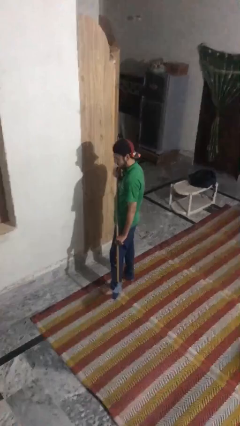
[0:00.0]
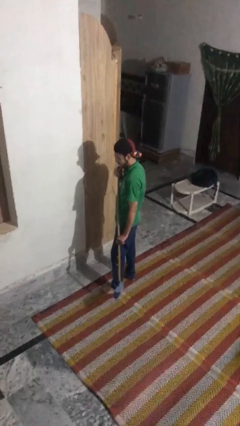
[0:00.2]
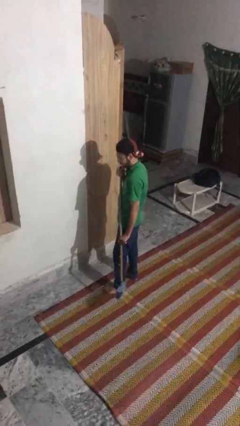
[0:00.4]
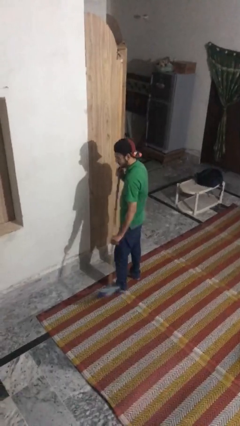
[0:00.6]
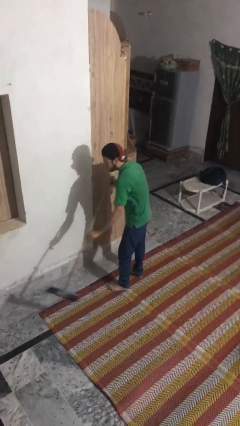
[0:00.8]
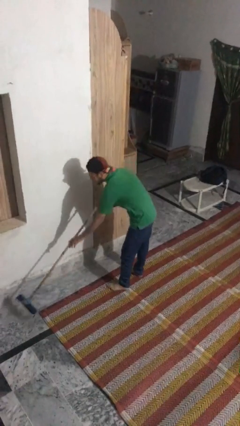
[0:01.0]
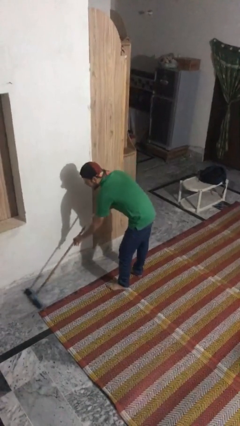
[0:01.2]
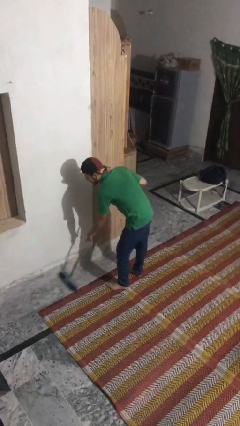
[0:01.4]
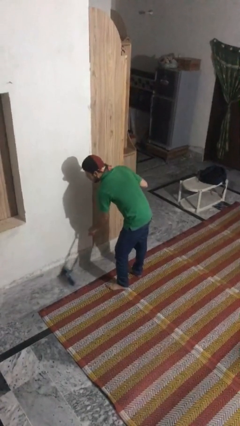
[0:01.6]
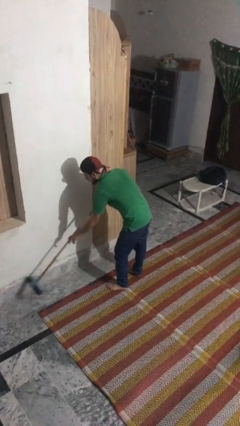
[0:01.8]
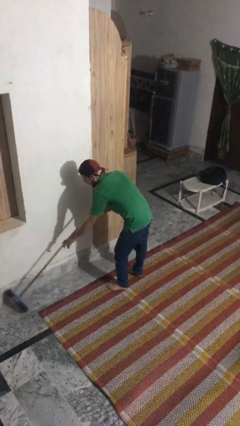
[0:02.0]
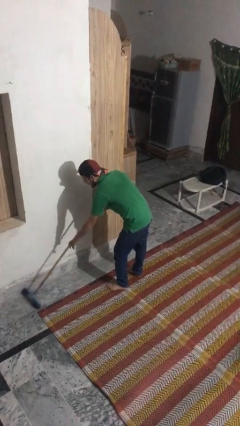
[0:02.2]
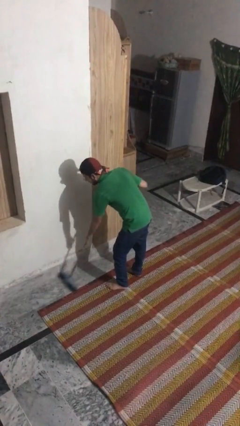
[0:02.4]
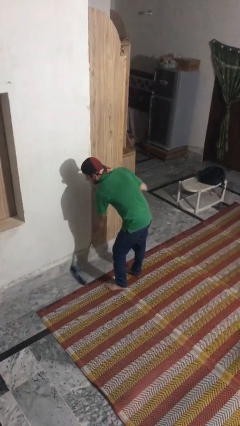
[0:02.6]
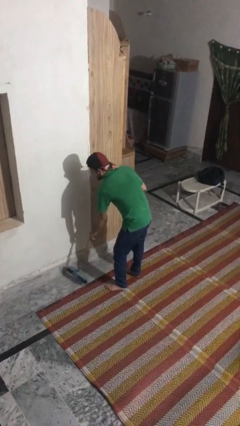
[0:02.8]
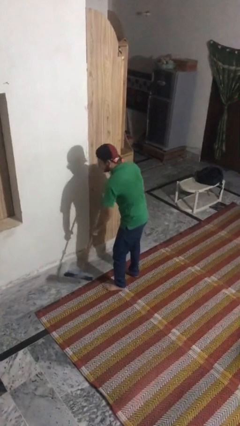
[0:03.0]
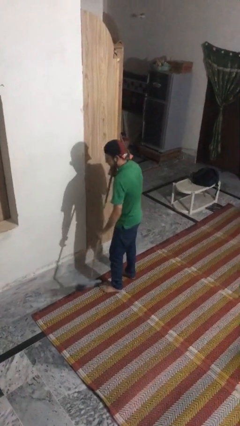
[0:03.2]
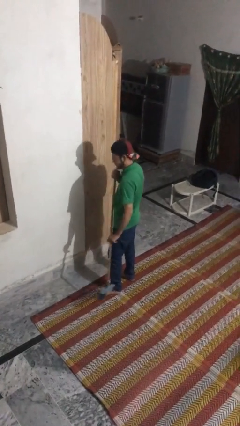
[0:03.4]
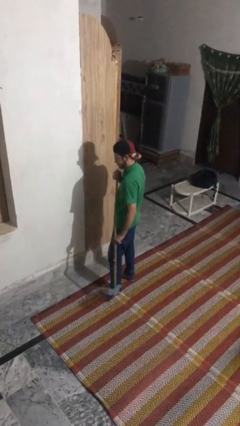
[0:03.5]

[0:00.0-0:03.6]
person sweeps floor

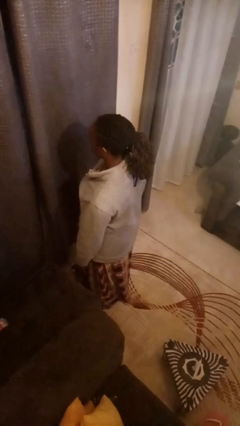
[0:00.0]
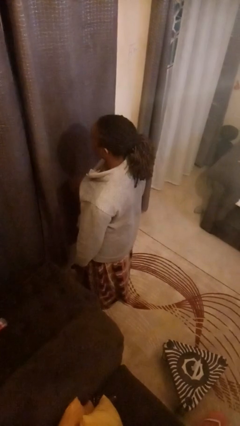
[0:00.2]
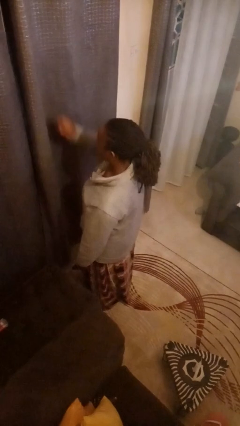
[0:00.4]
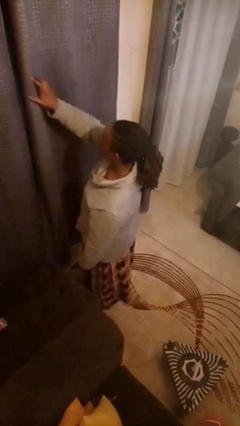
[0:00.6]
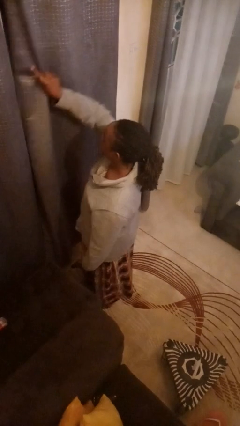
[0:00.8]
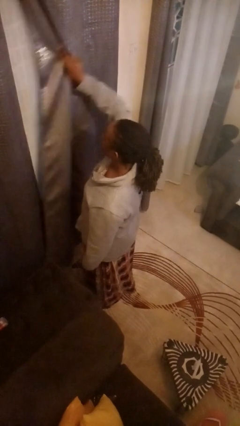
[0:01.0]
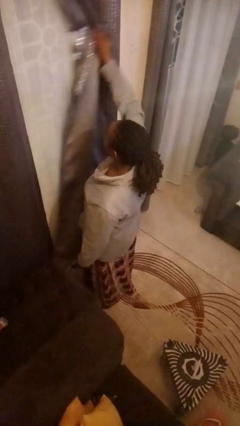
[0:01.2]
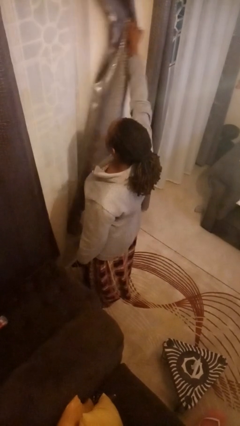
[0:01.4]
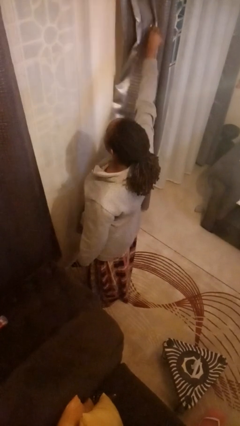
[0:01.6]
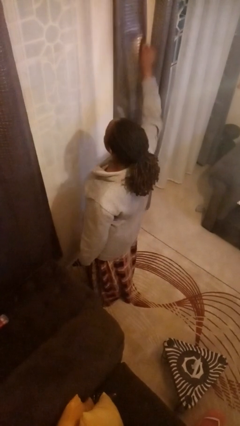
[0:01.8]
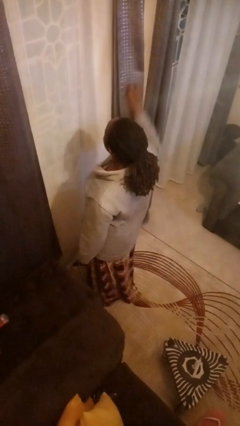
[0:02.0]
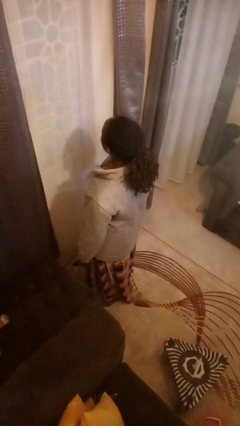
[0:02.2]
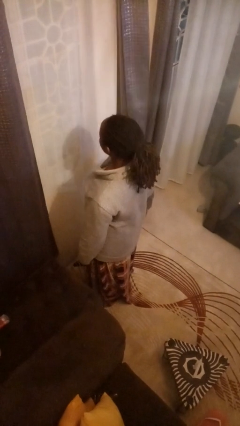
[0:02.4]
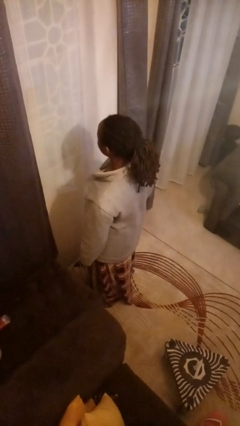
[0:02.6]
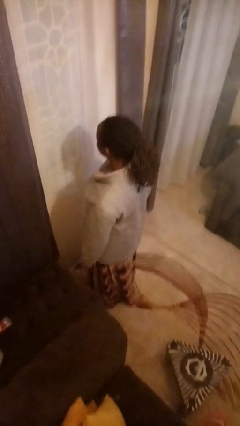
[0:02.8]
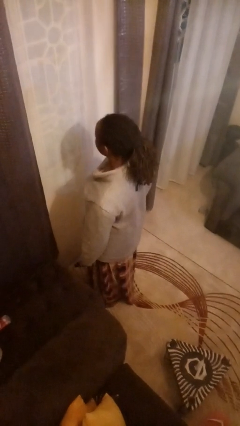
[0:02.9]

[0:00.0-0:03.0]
person opens curtains

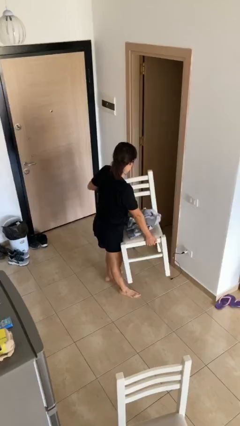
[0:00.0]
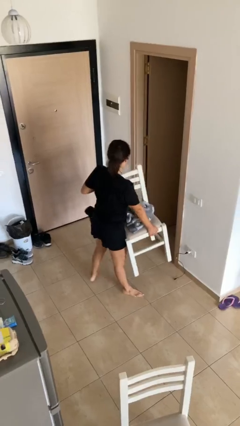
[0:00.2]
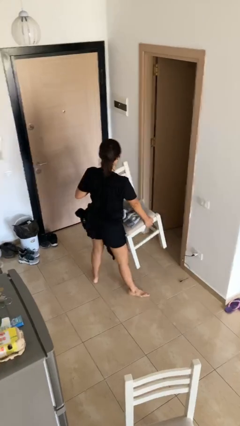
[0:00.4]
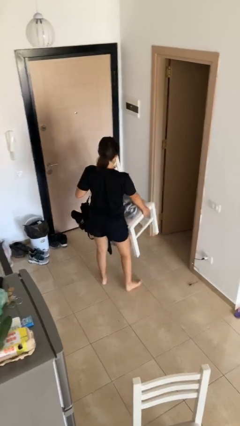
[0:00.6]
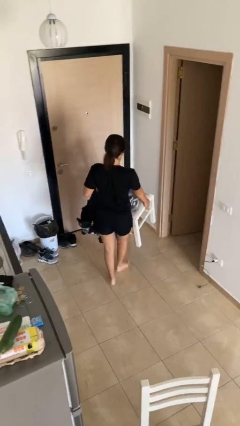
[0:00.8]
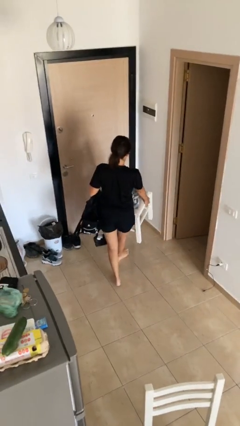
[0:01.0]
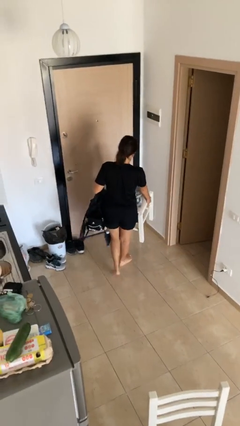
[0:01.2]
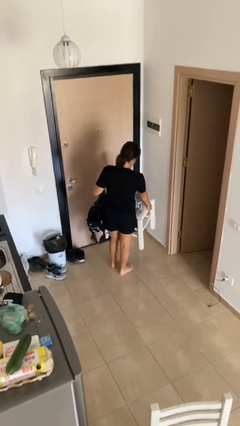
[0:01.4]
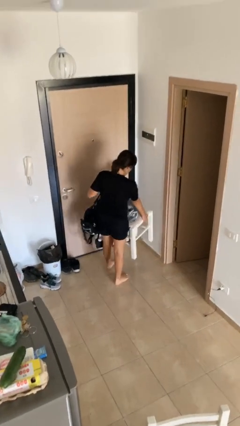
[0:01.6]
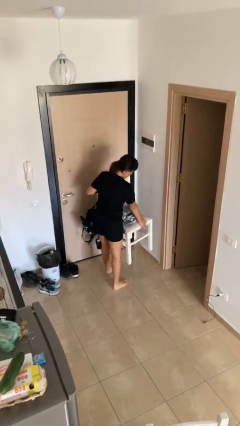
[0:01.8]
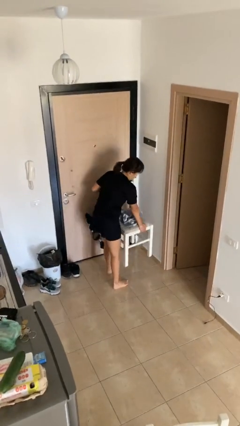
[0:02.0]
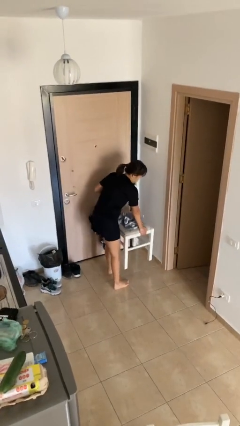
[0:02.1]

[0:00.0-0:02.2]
person carries heavy object

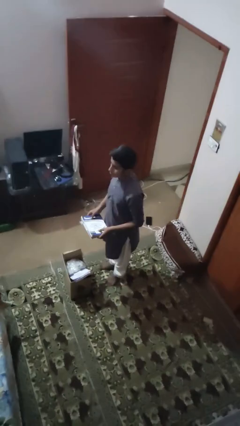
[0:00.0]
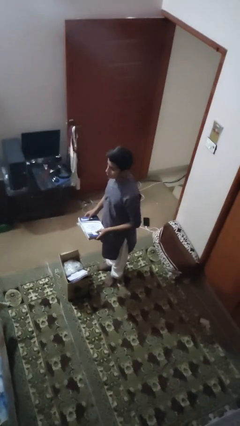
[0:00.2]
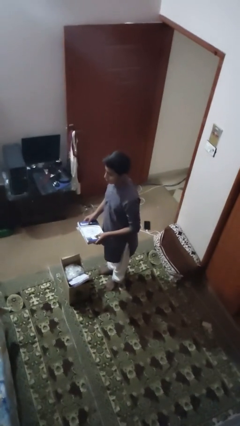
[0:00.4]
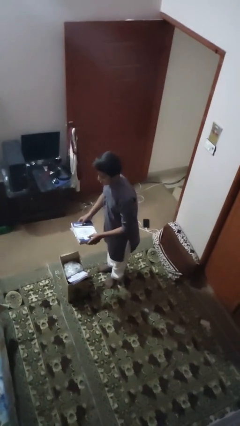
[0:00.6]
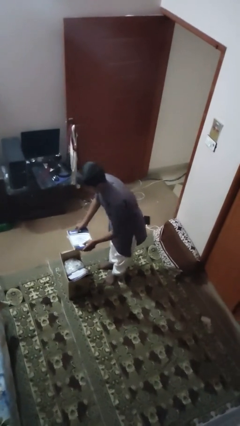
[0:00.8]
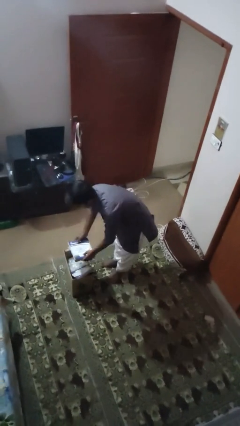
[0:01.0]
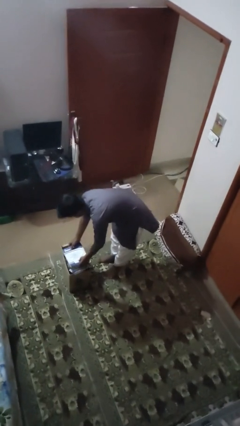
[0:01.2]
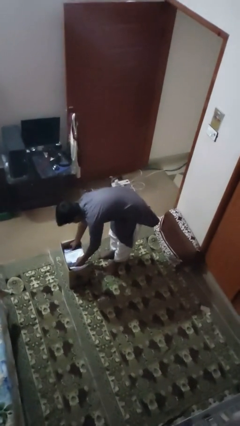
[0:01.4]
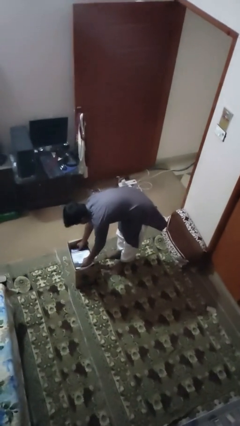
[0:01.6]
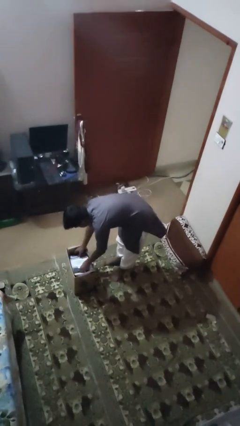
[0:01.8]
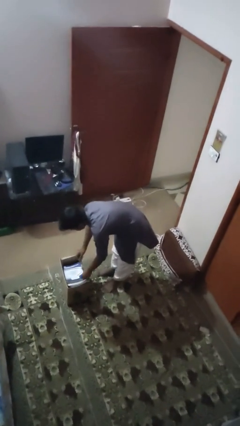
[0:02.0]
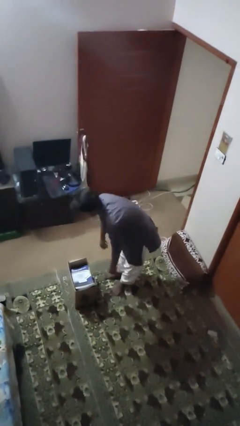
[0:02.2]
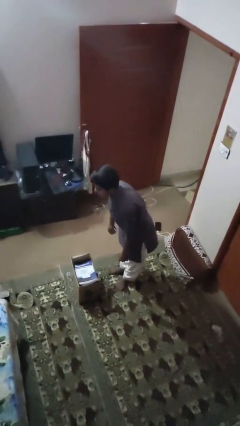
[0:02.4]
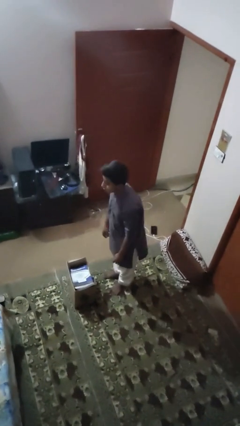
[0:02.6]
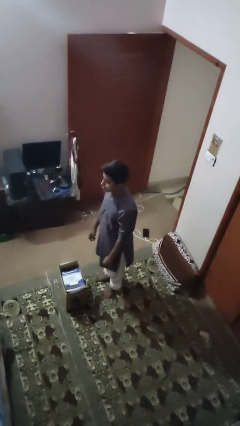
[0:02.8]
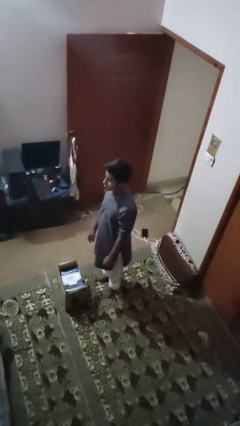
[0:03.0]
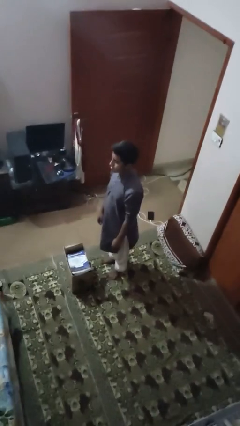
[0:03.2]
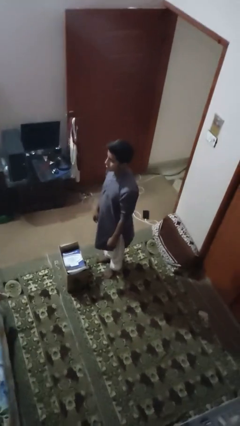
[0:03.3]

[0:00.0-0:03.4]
person puts object into box

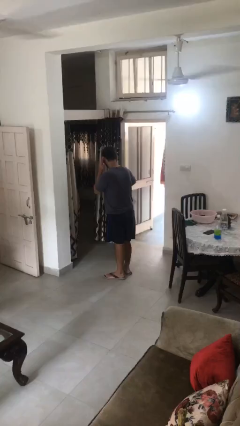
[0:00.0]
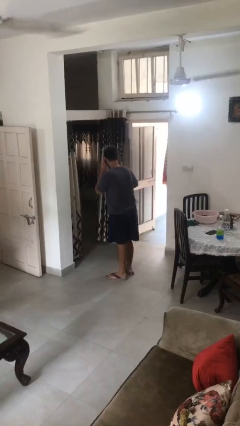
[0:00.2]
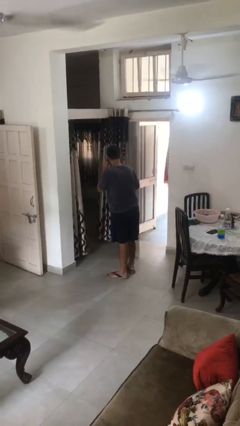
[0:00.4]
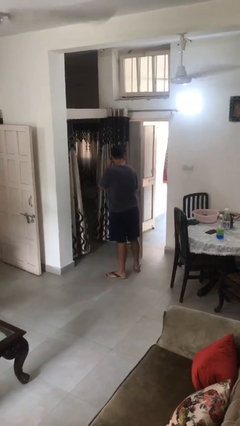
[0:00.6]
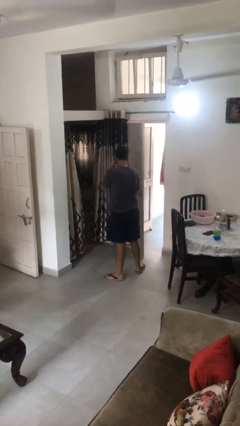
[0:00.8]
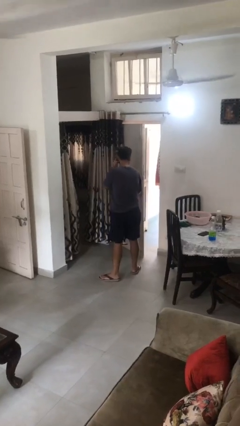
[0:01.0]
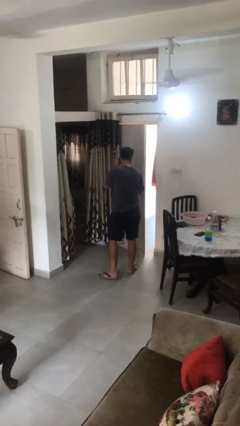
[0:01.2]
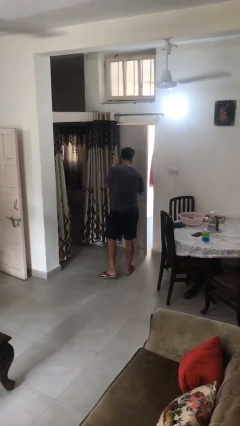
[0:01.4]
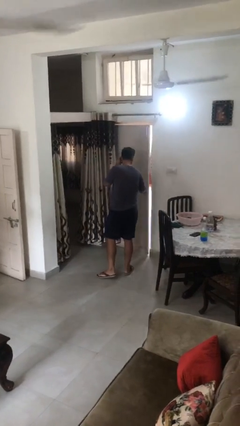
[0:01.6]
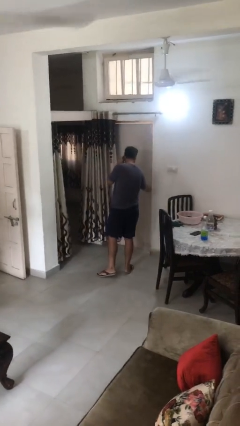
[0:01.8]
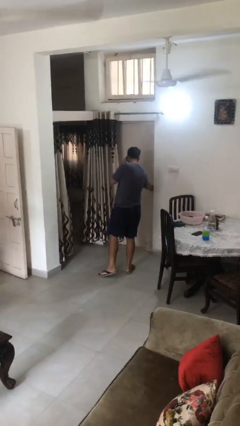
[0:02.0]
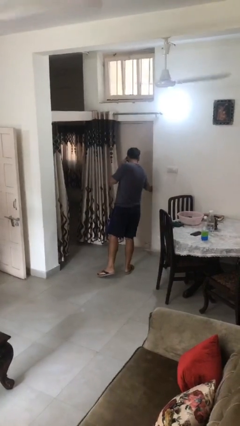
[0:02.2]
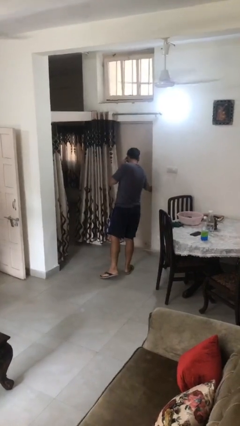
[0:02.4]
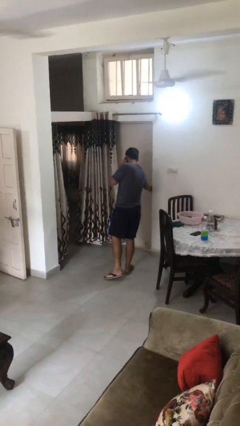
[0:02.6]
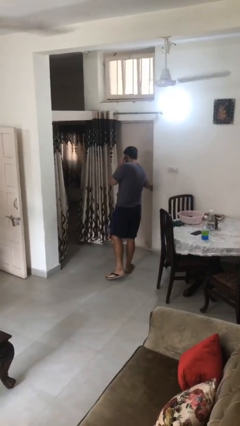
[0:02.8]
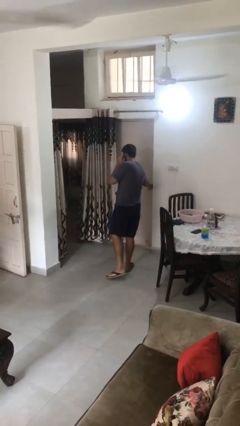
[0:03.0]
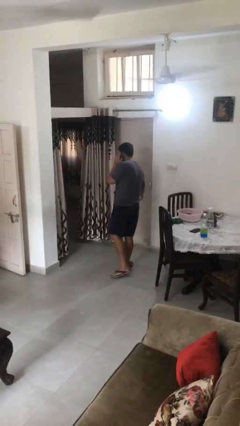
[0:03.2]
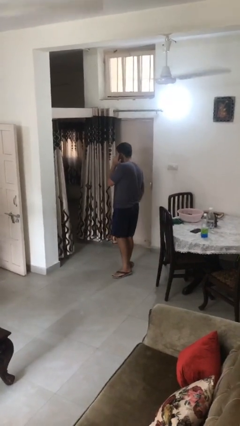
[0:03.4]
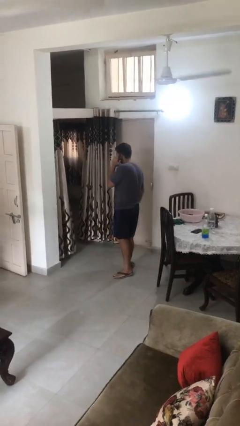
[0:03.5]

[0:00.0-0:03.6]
person closes facility door

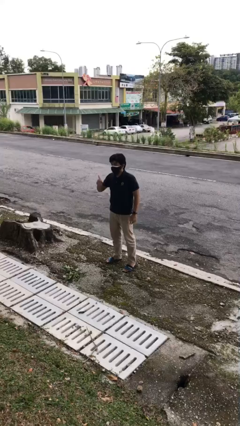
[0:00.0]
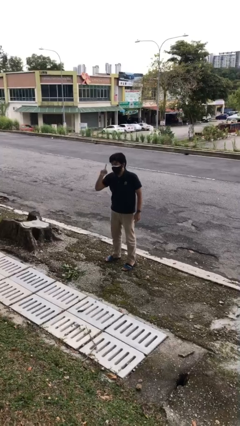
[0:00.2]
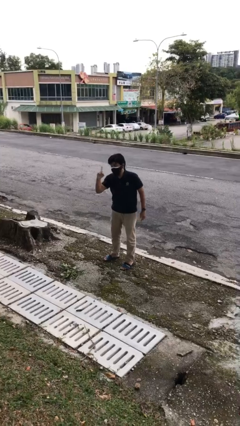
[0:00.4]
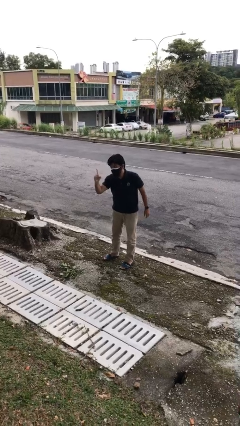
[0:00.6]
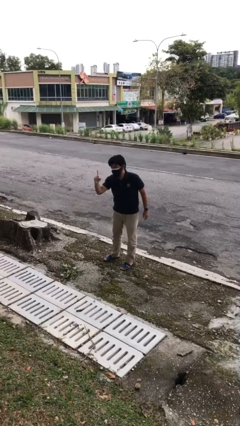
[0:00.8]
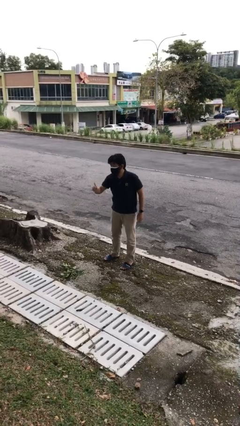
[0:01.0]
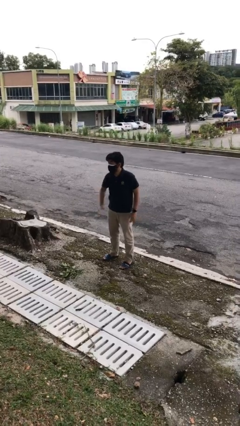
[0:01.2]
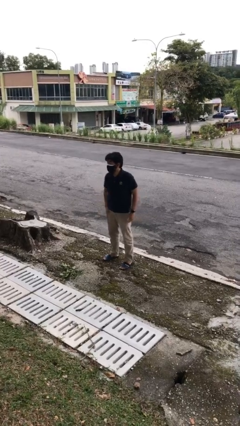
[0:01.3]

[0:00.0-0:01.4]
person gestures number one

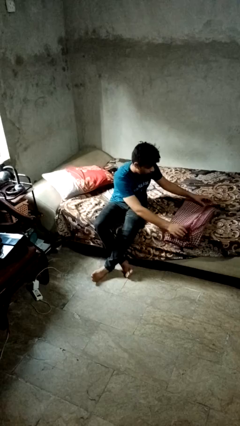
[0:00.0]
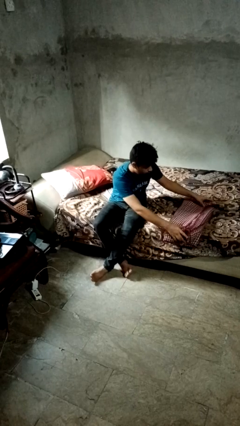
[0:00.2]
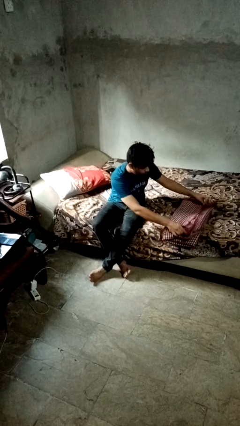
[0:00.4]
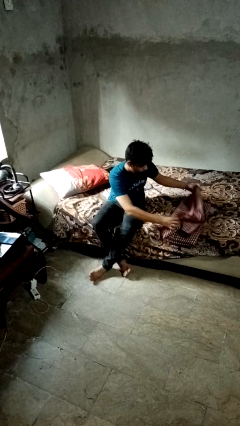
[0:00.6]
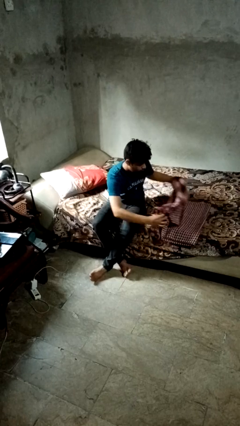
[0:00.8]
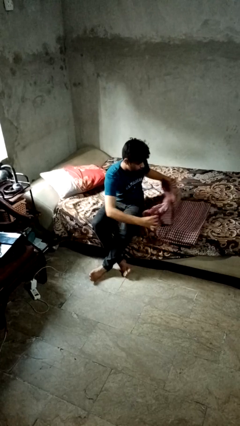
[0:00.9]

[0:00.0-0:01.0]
person unfolds blanket
